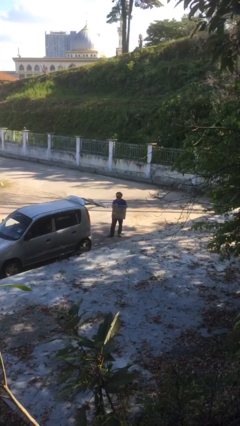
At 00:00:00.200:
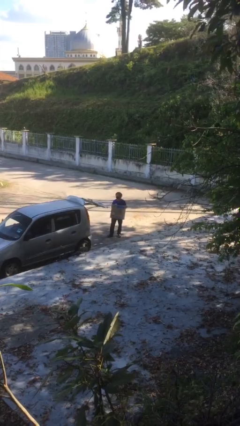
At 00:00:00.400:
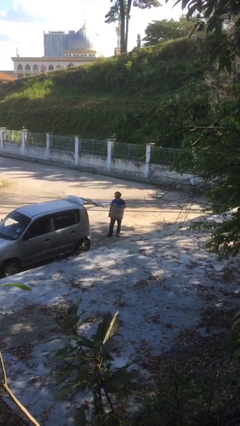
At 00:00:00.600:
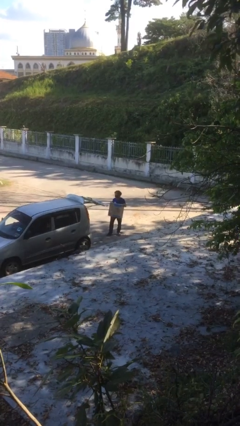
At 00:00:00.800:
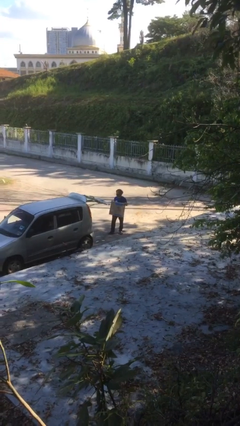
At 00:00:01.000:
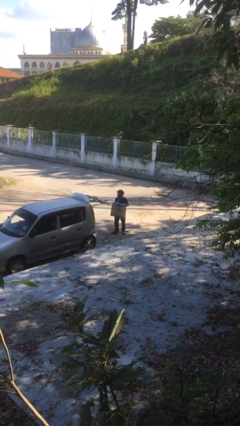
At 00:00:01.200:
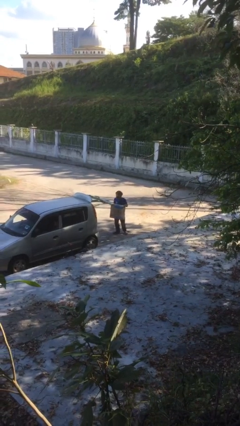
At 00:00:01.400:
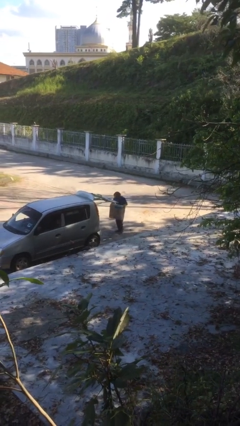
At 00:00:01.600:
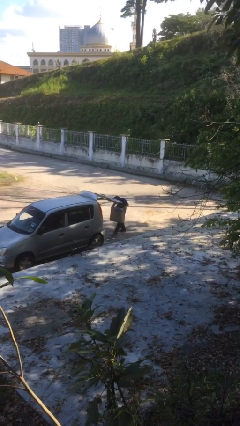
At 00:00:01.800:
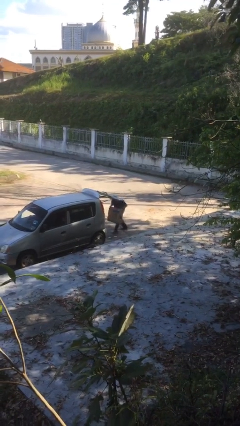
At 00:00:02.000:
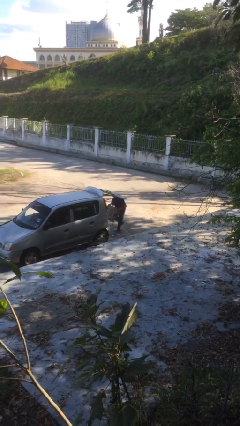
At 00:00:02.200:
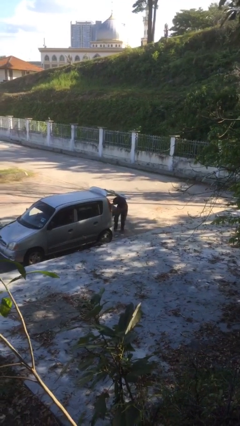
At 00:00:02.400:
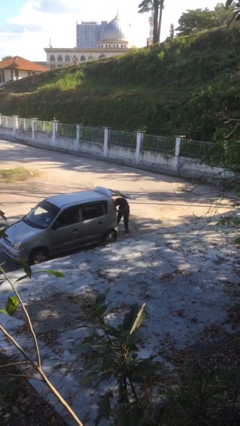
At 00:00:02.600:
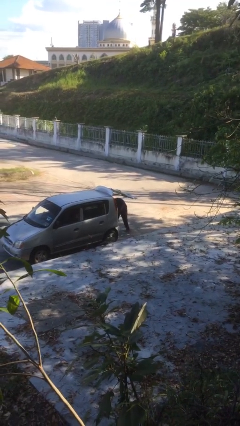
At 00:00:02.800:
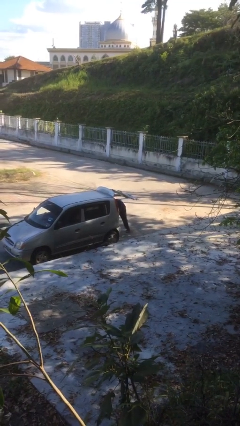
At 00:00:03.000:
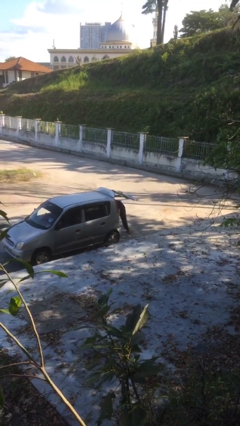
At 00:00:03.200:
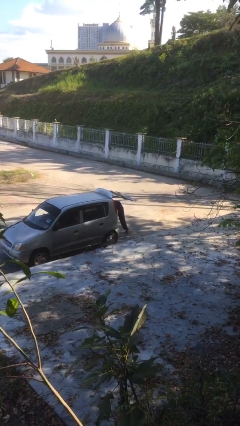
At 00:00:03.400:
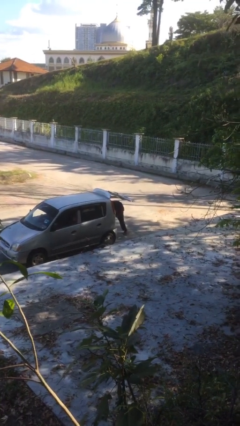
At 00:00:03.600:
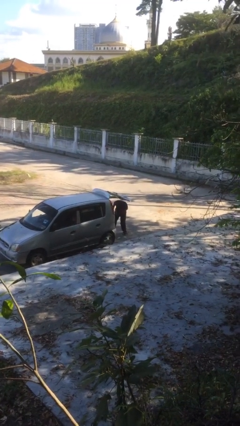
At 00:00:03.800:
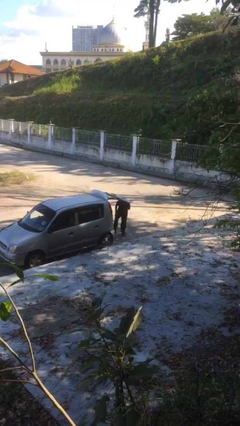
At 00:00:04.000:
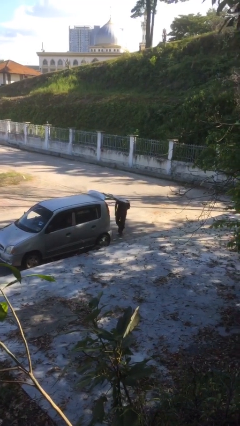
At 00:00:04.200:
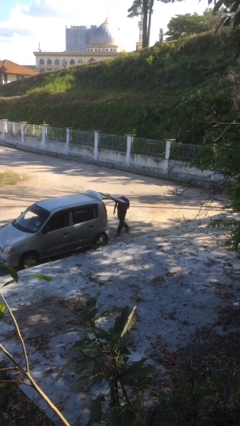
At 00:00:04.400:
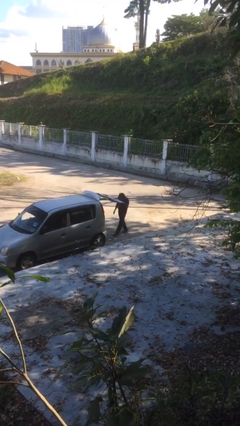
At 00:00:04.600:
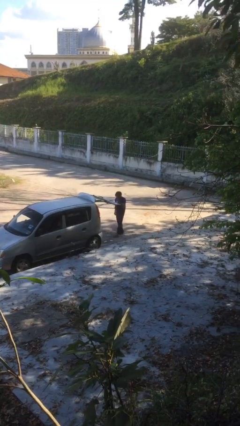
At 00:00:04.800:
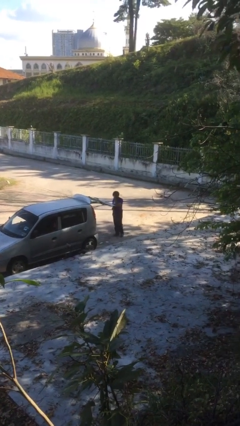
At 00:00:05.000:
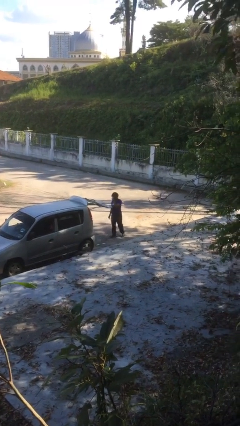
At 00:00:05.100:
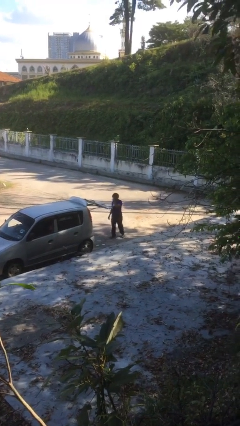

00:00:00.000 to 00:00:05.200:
person loads car

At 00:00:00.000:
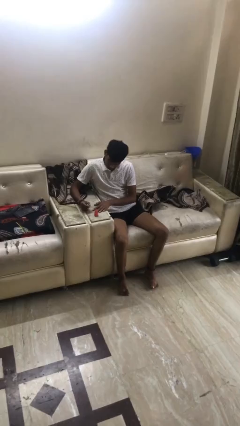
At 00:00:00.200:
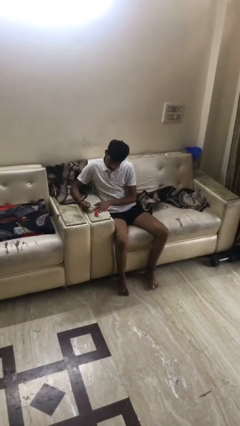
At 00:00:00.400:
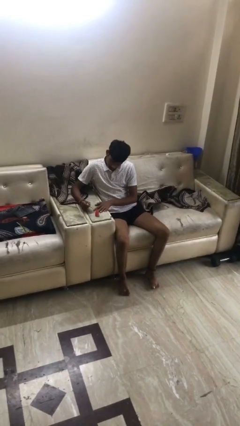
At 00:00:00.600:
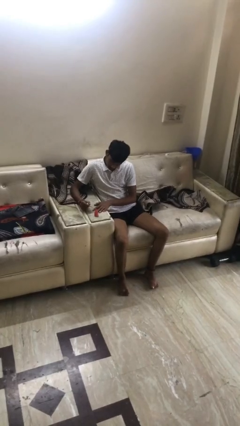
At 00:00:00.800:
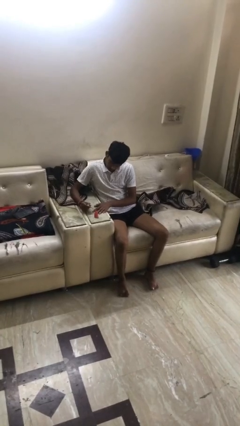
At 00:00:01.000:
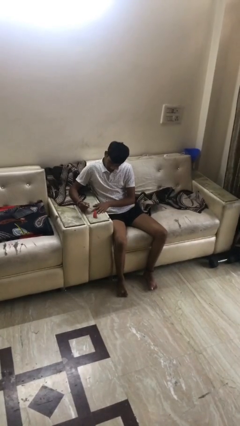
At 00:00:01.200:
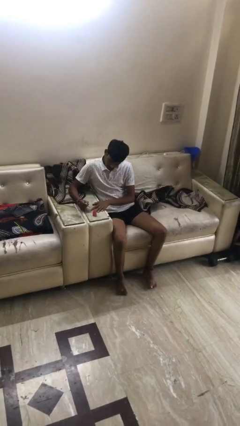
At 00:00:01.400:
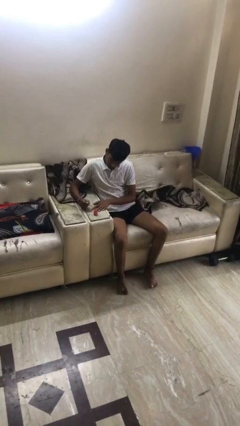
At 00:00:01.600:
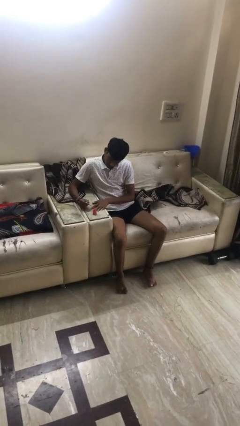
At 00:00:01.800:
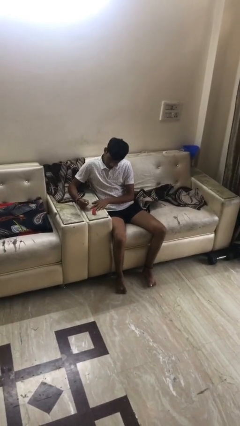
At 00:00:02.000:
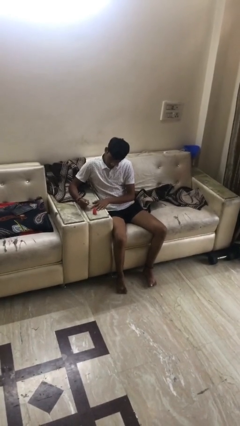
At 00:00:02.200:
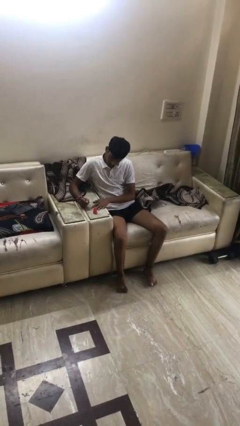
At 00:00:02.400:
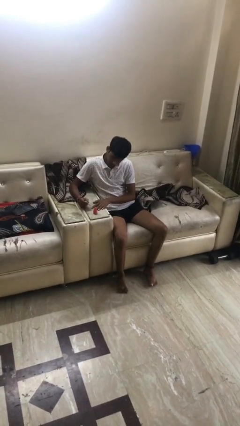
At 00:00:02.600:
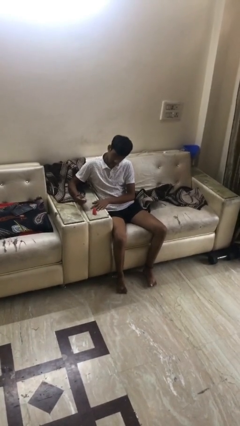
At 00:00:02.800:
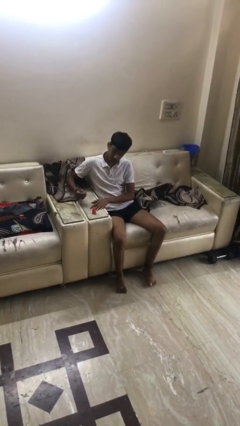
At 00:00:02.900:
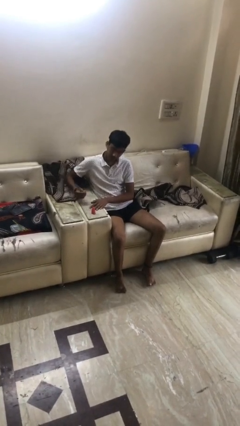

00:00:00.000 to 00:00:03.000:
person paints fingernails

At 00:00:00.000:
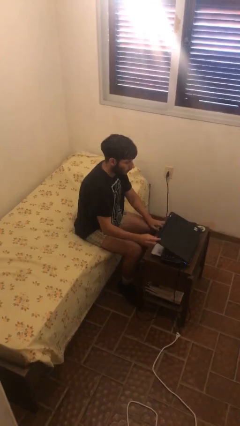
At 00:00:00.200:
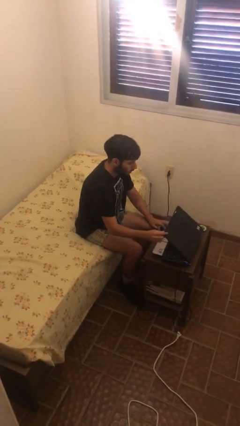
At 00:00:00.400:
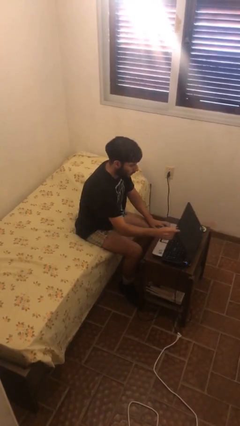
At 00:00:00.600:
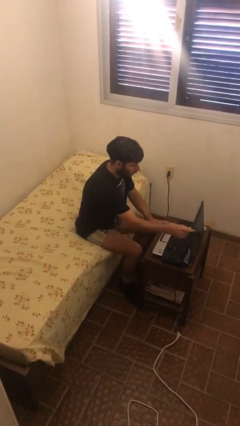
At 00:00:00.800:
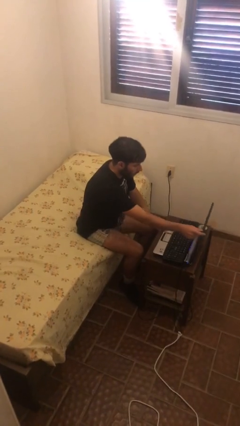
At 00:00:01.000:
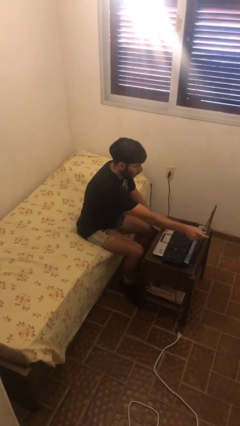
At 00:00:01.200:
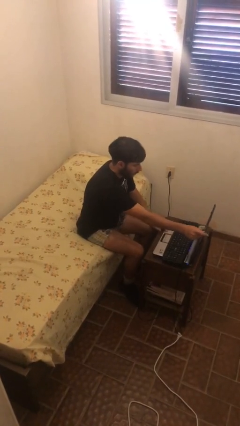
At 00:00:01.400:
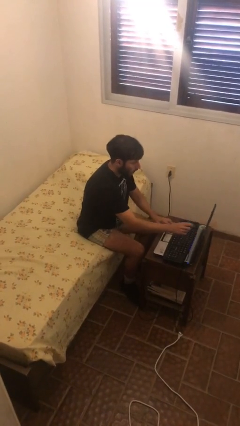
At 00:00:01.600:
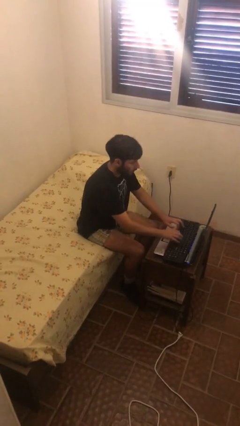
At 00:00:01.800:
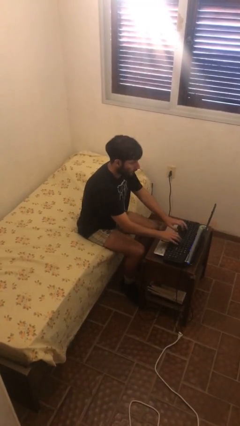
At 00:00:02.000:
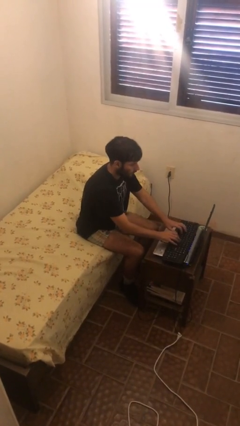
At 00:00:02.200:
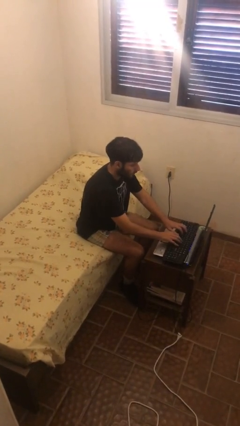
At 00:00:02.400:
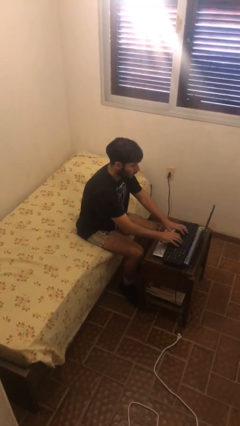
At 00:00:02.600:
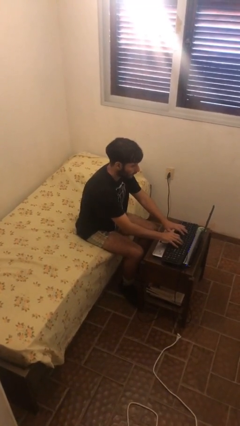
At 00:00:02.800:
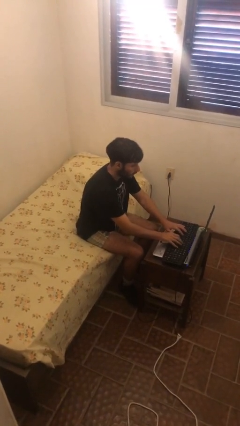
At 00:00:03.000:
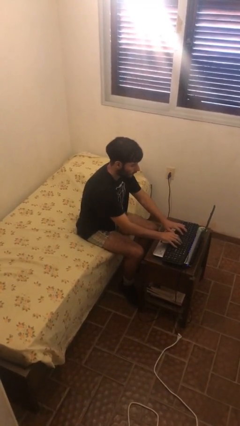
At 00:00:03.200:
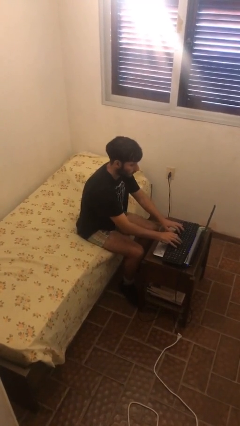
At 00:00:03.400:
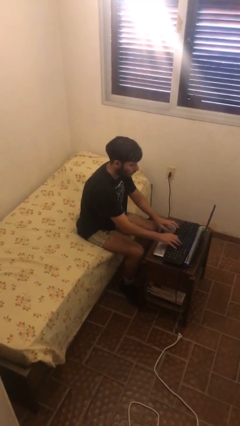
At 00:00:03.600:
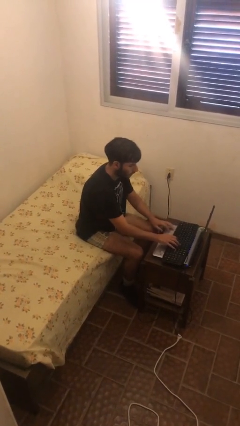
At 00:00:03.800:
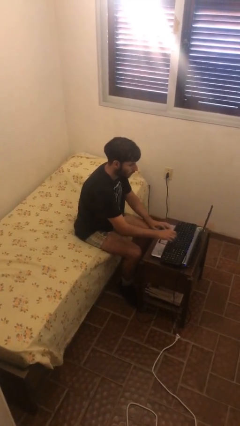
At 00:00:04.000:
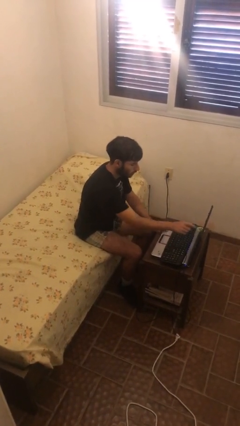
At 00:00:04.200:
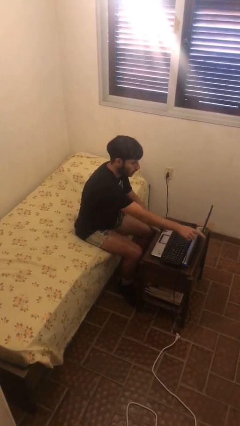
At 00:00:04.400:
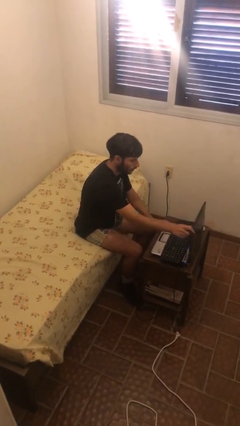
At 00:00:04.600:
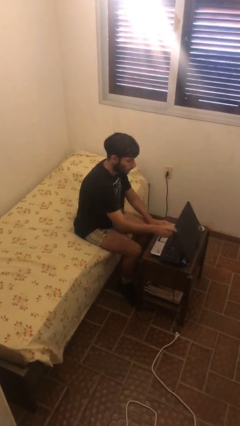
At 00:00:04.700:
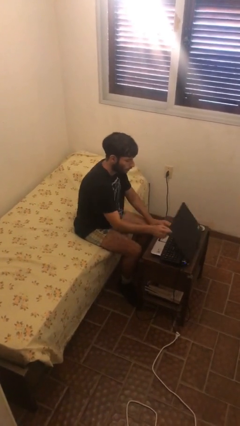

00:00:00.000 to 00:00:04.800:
person interacts with laptop

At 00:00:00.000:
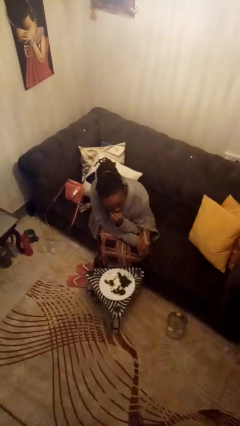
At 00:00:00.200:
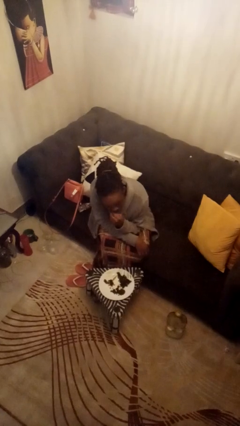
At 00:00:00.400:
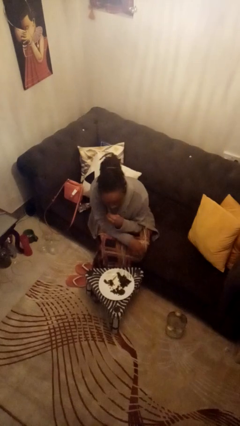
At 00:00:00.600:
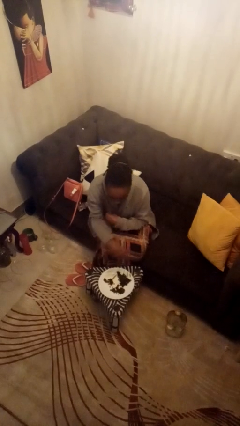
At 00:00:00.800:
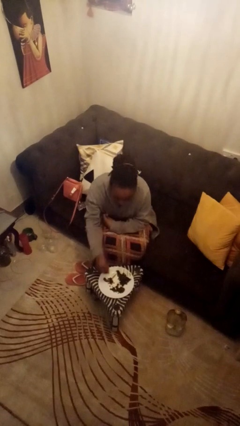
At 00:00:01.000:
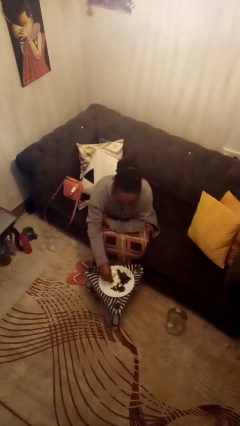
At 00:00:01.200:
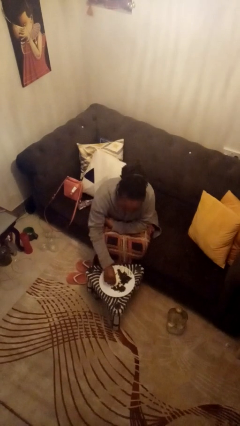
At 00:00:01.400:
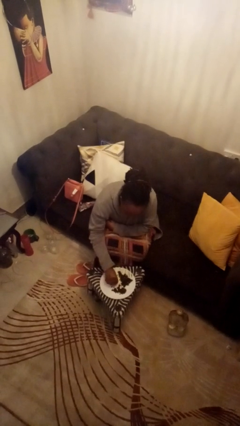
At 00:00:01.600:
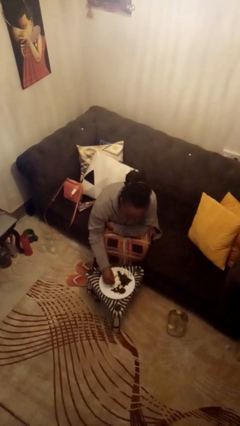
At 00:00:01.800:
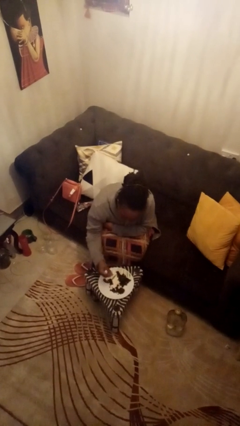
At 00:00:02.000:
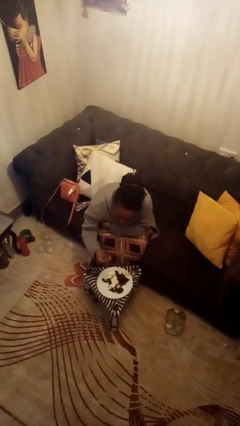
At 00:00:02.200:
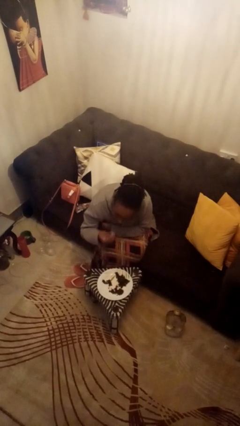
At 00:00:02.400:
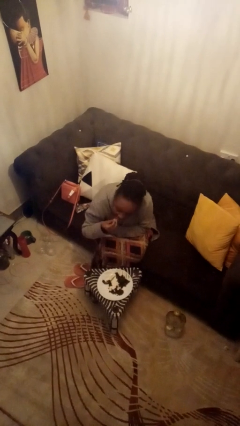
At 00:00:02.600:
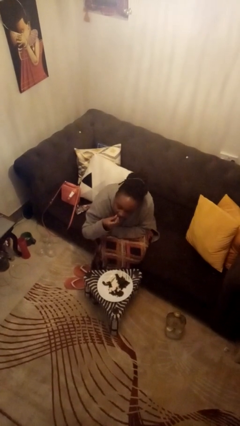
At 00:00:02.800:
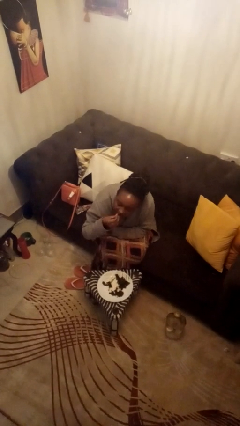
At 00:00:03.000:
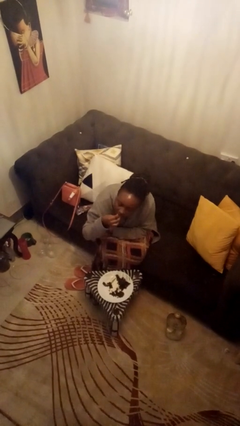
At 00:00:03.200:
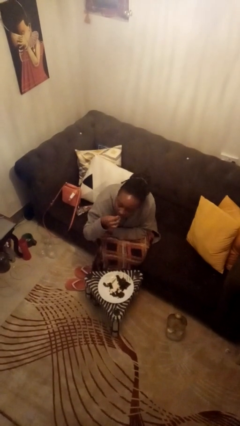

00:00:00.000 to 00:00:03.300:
person eats with hands

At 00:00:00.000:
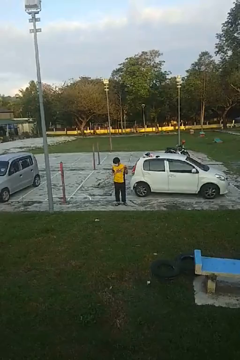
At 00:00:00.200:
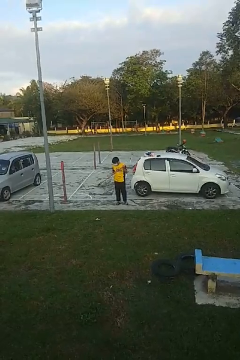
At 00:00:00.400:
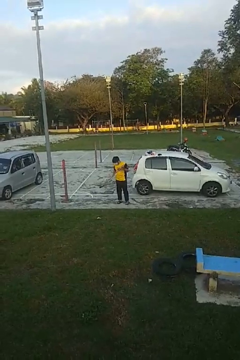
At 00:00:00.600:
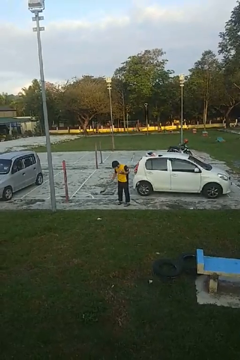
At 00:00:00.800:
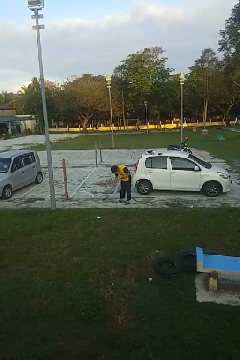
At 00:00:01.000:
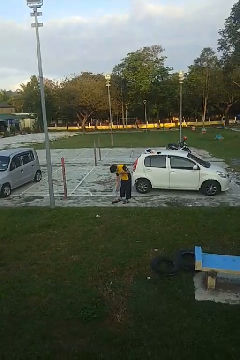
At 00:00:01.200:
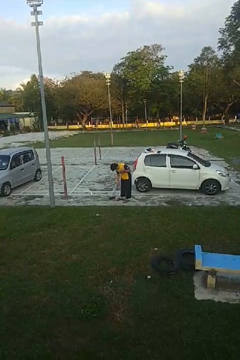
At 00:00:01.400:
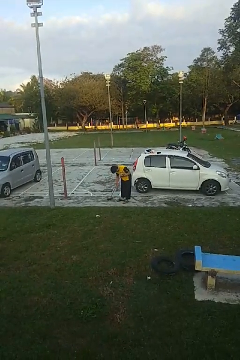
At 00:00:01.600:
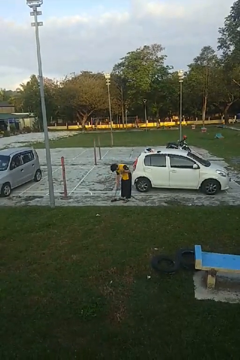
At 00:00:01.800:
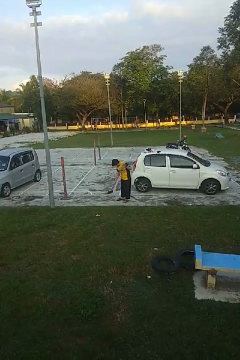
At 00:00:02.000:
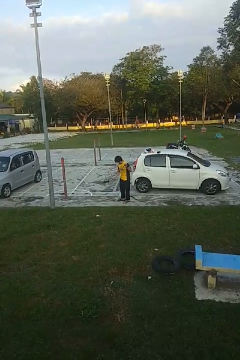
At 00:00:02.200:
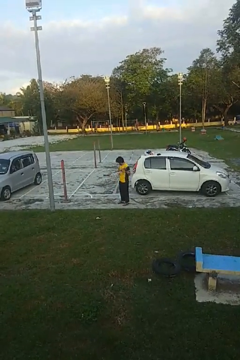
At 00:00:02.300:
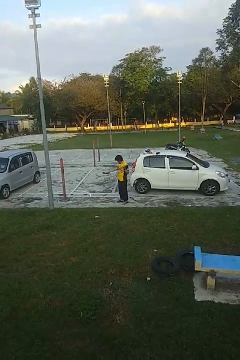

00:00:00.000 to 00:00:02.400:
person sweeps floor
